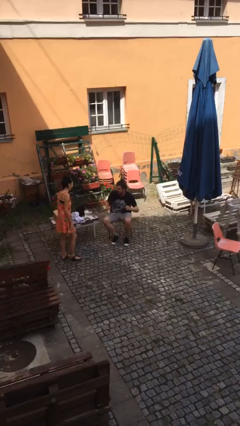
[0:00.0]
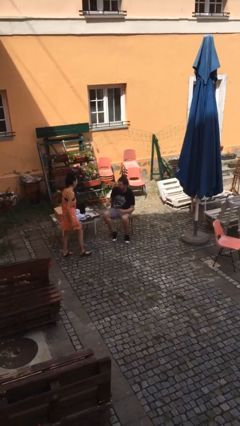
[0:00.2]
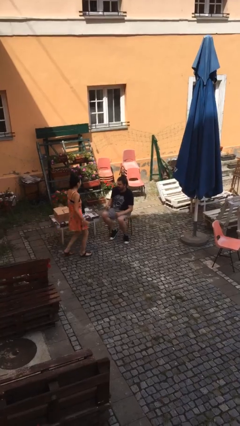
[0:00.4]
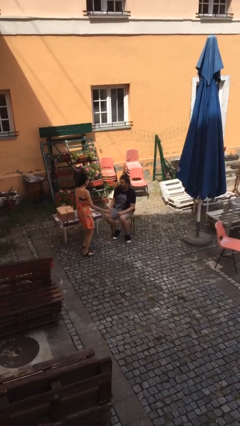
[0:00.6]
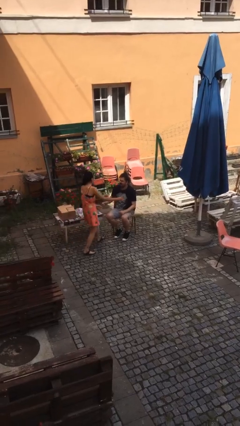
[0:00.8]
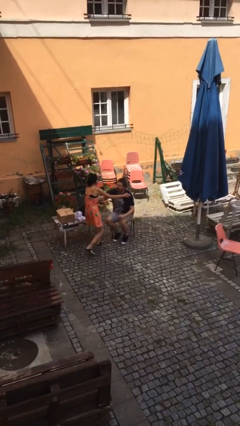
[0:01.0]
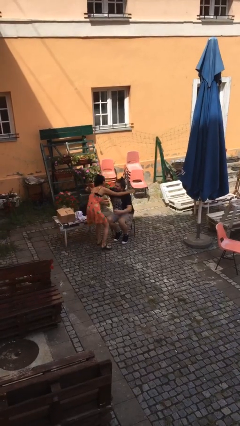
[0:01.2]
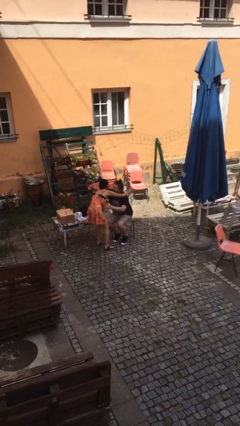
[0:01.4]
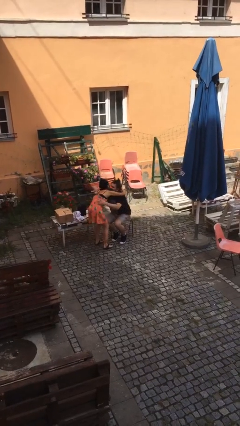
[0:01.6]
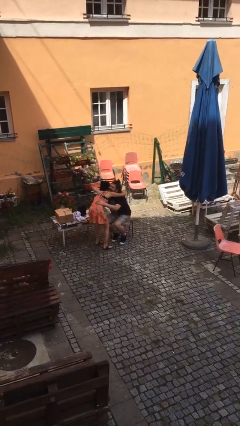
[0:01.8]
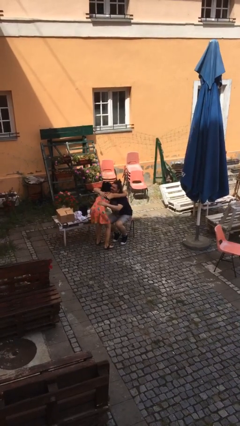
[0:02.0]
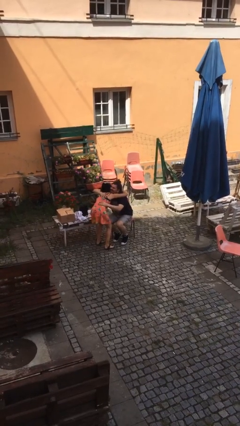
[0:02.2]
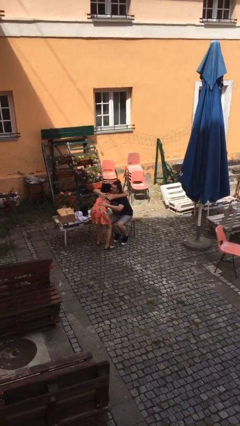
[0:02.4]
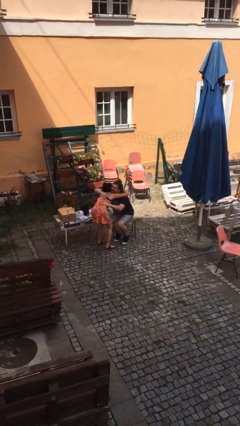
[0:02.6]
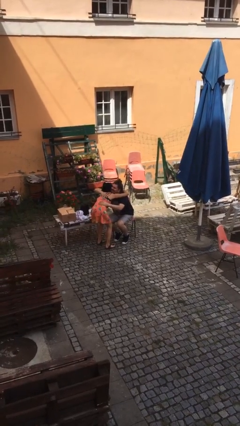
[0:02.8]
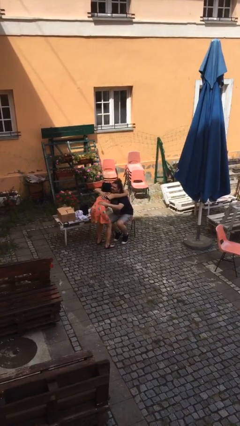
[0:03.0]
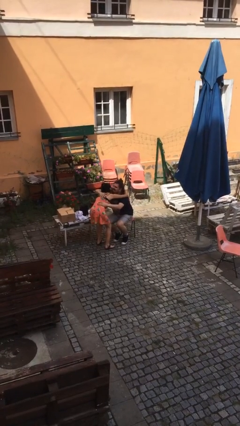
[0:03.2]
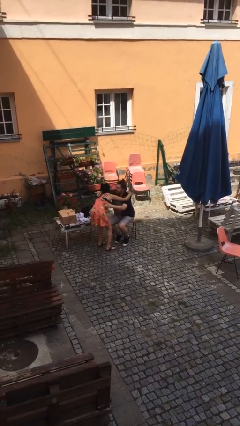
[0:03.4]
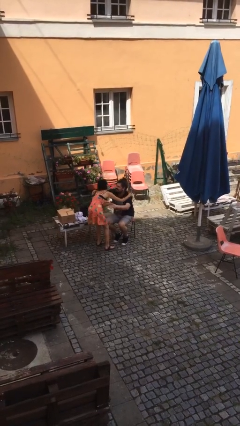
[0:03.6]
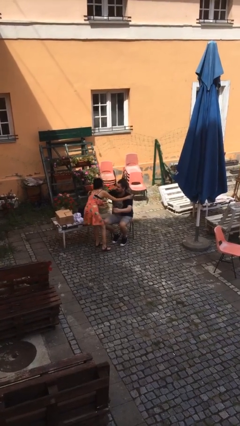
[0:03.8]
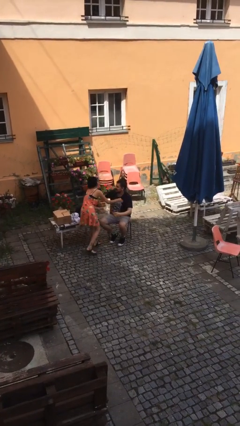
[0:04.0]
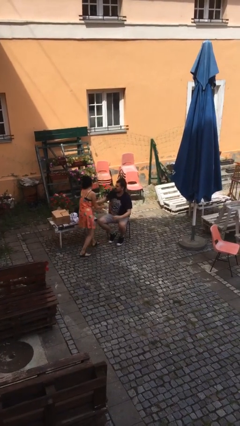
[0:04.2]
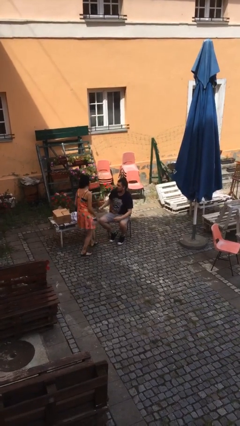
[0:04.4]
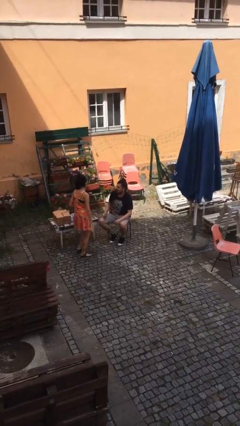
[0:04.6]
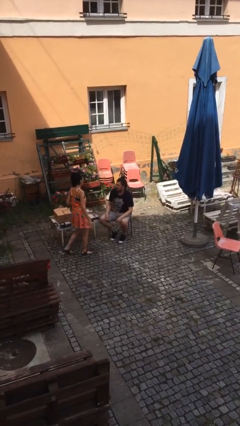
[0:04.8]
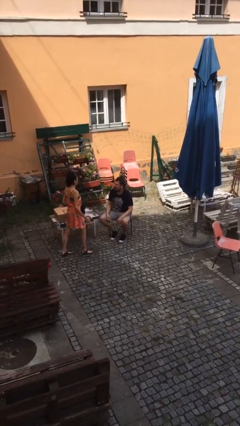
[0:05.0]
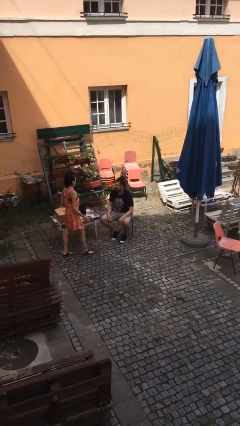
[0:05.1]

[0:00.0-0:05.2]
person embraces person

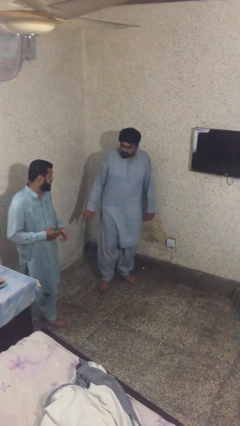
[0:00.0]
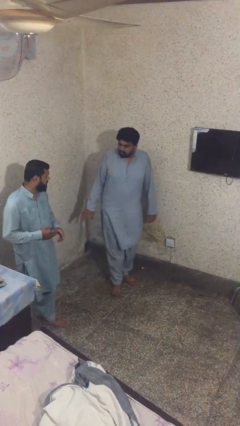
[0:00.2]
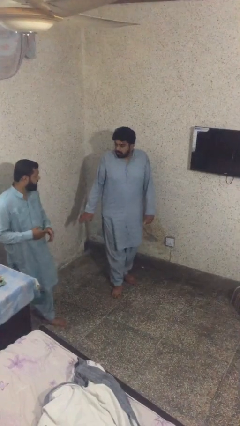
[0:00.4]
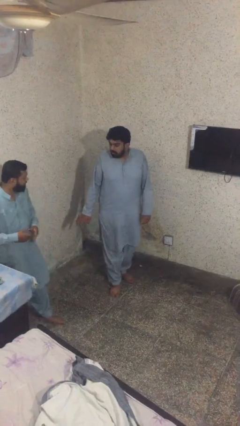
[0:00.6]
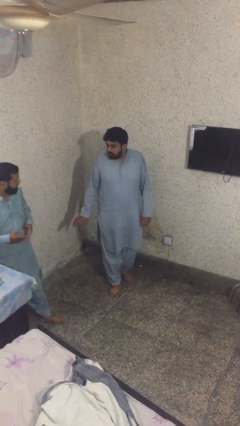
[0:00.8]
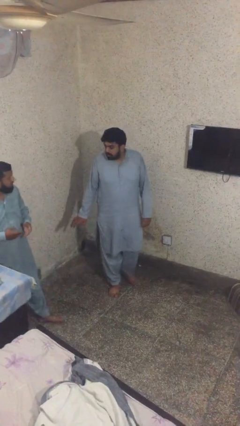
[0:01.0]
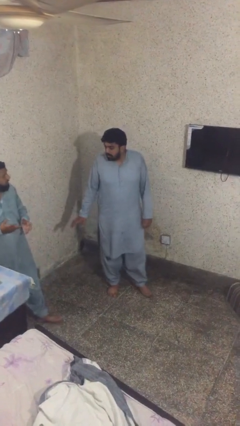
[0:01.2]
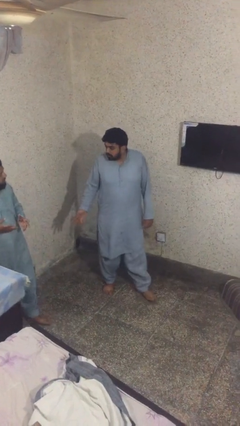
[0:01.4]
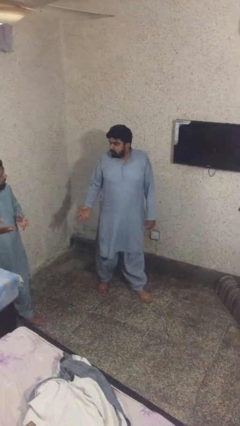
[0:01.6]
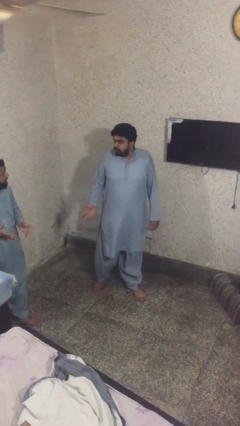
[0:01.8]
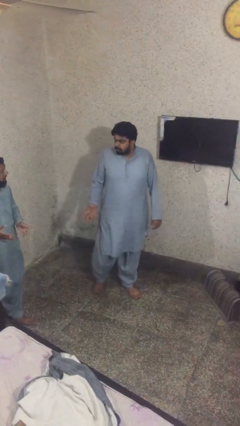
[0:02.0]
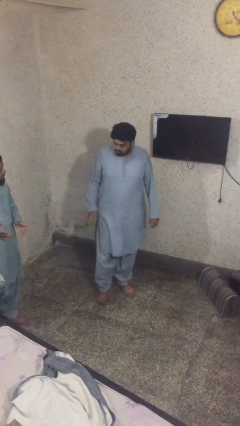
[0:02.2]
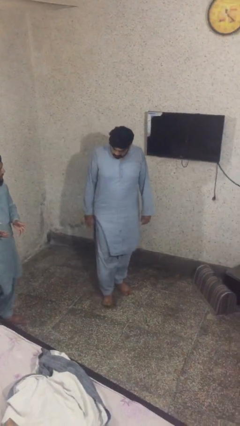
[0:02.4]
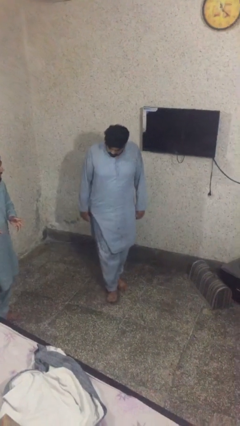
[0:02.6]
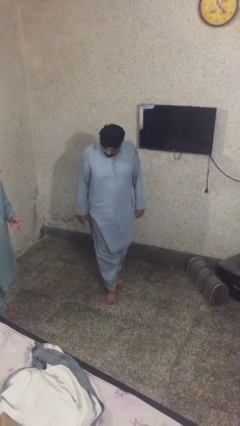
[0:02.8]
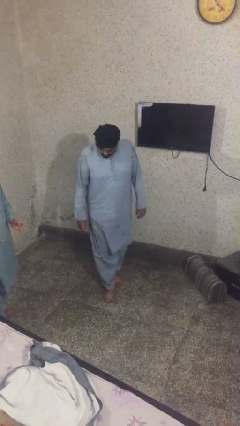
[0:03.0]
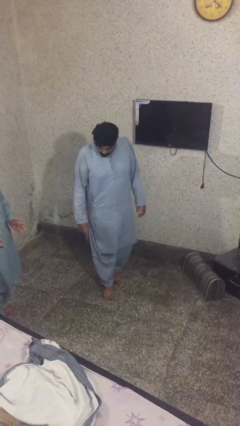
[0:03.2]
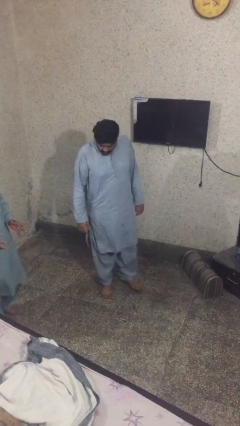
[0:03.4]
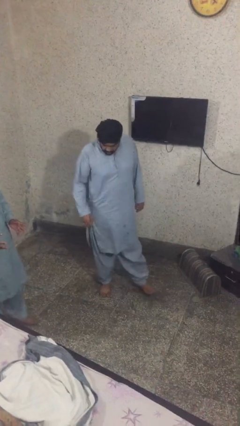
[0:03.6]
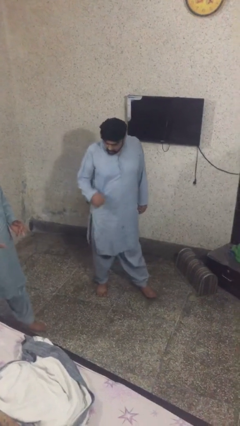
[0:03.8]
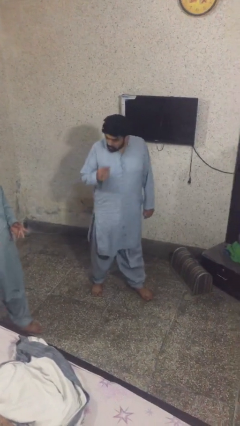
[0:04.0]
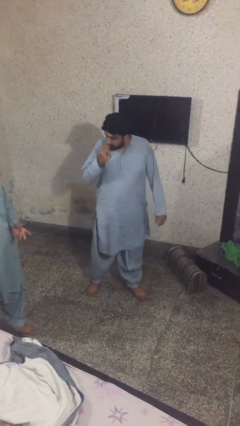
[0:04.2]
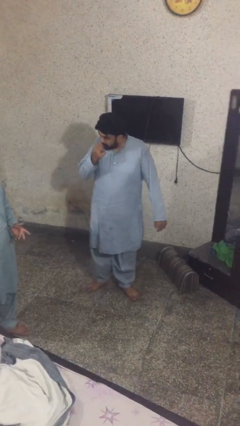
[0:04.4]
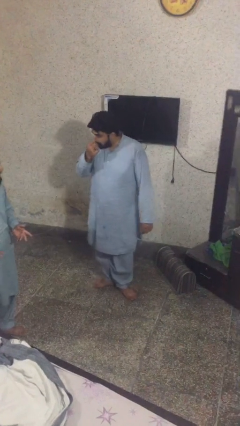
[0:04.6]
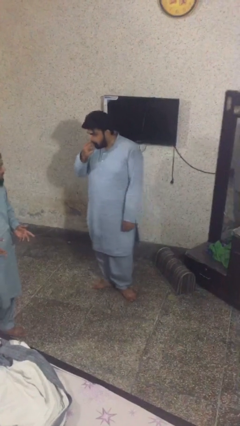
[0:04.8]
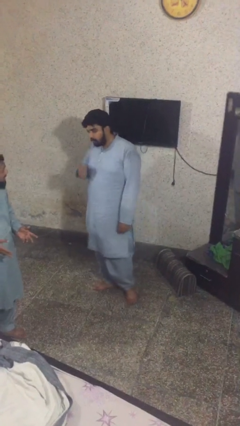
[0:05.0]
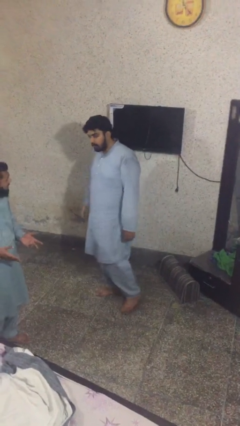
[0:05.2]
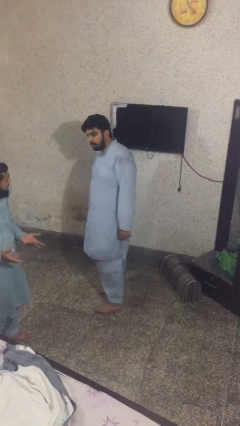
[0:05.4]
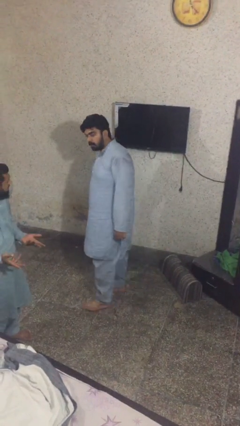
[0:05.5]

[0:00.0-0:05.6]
person talks to person

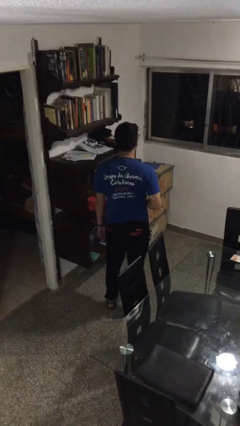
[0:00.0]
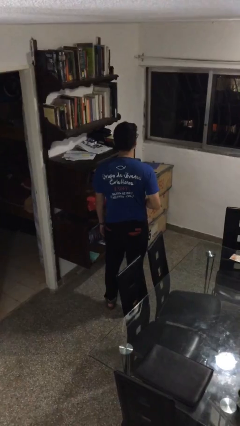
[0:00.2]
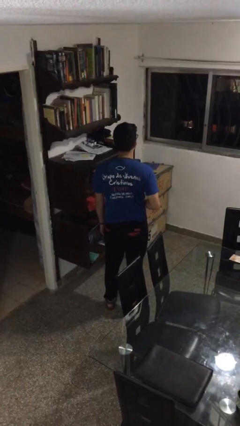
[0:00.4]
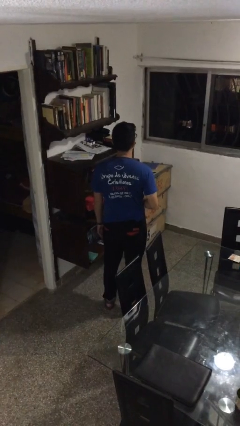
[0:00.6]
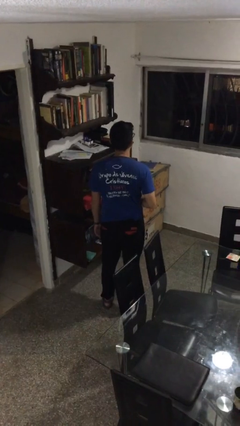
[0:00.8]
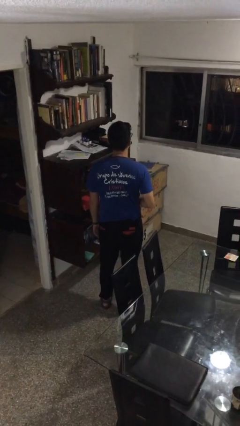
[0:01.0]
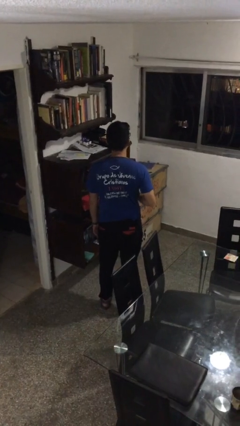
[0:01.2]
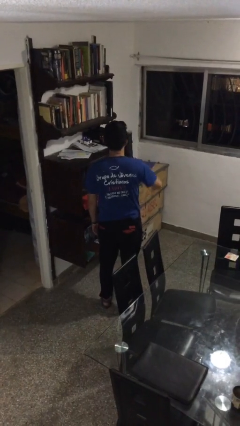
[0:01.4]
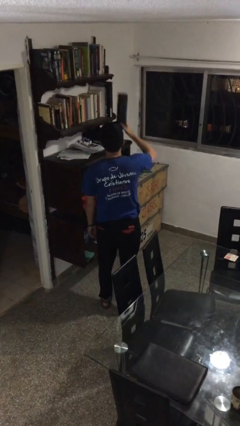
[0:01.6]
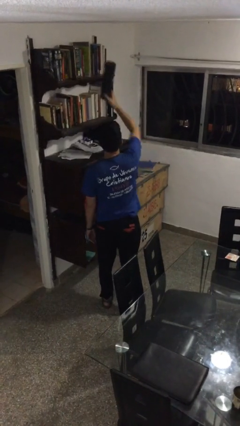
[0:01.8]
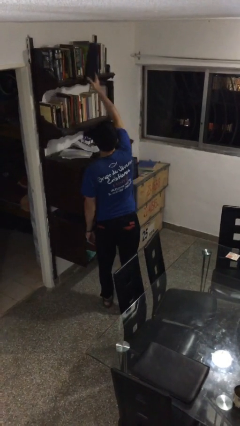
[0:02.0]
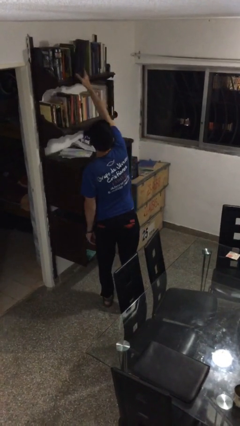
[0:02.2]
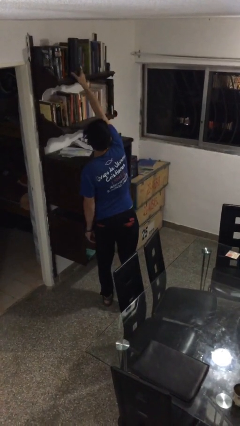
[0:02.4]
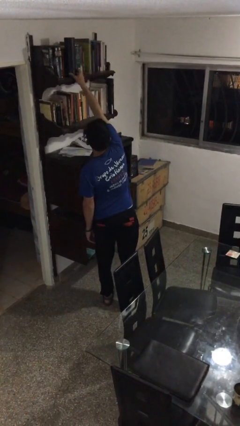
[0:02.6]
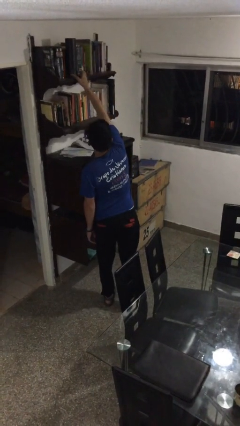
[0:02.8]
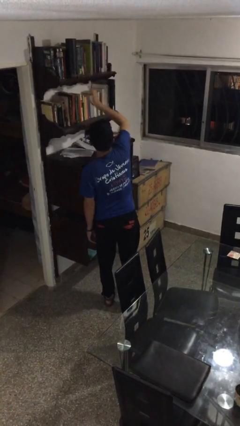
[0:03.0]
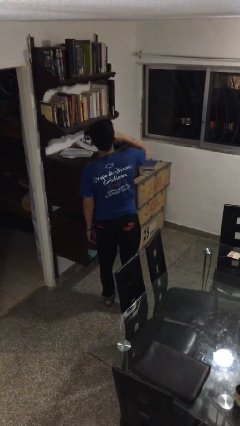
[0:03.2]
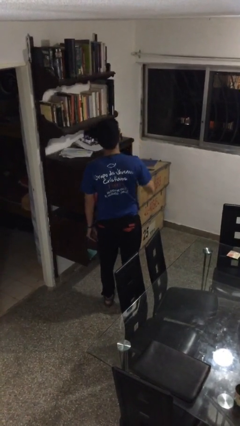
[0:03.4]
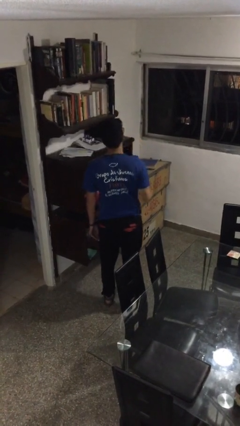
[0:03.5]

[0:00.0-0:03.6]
person puts down object on shelf

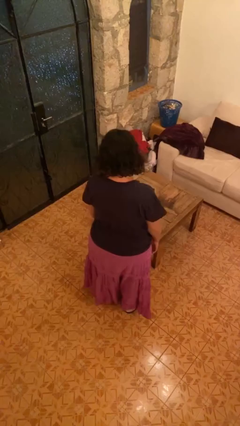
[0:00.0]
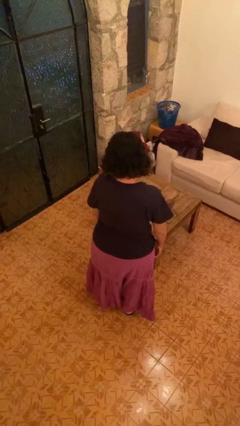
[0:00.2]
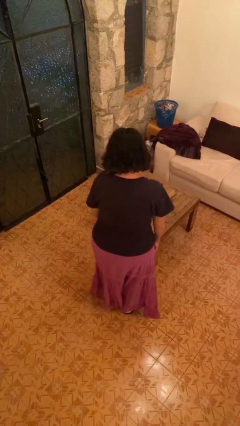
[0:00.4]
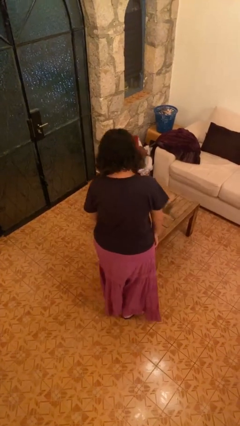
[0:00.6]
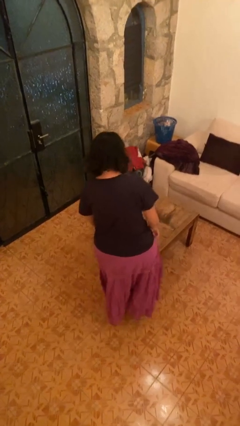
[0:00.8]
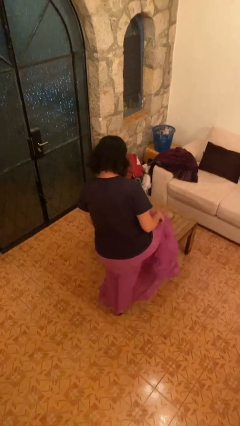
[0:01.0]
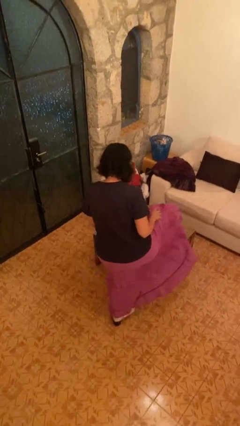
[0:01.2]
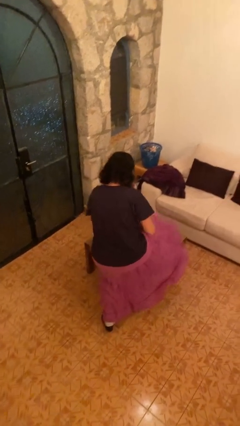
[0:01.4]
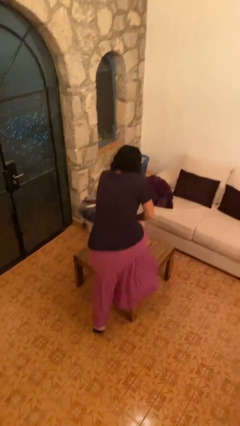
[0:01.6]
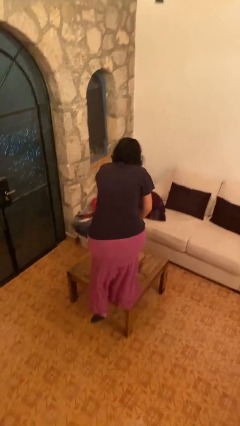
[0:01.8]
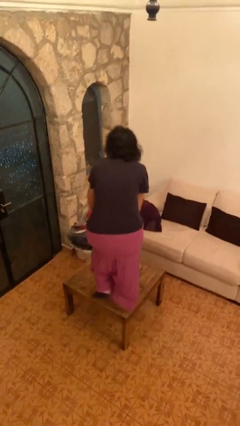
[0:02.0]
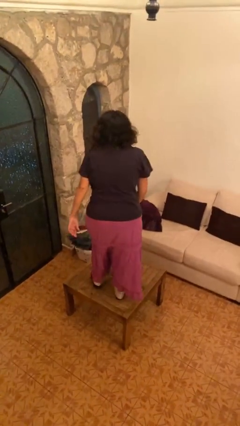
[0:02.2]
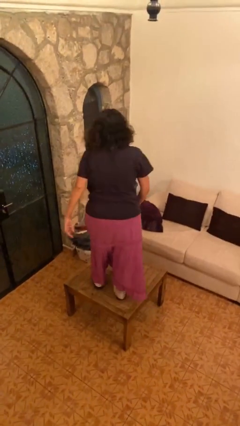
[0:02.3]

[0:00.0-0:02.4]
person climbs on table

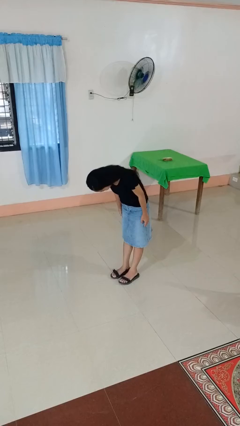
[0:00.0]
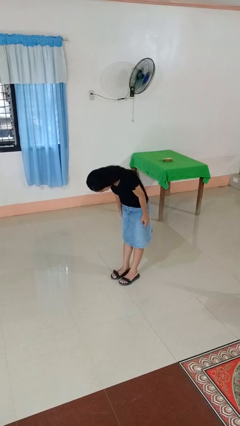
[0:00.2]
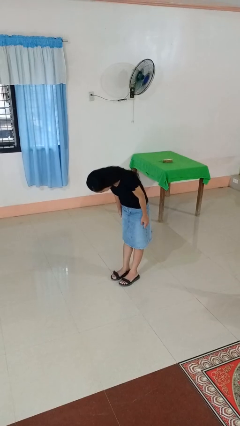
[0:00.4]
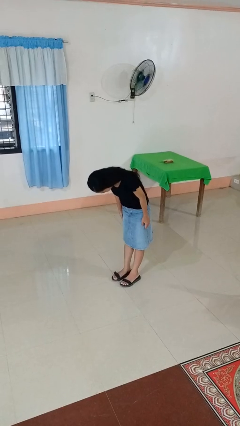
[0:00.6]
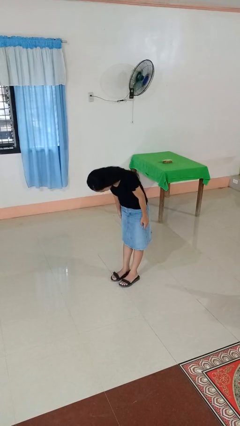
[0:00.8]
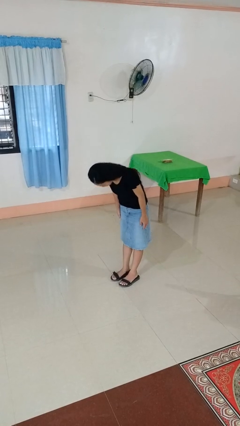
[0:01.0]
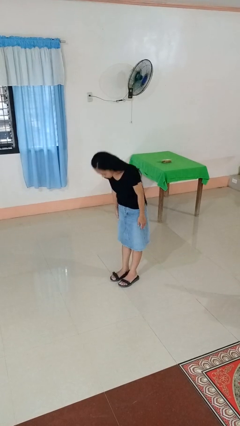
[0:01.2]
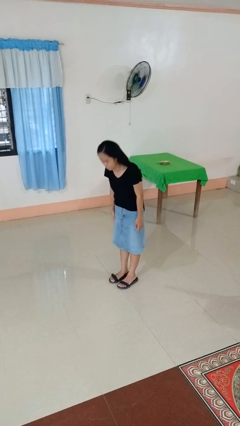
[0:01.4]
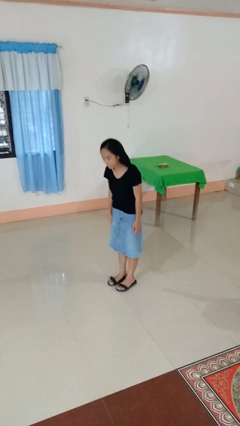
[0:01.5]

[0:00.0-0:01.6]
person bows
